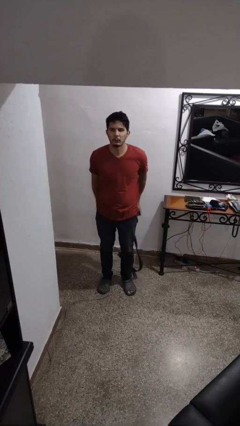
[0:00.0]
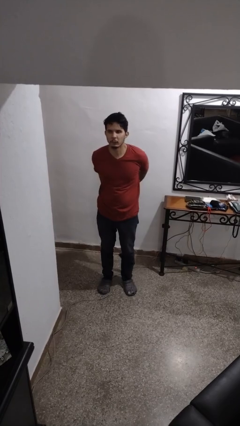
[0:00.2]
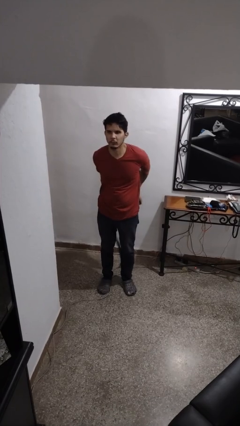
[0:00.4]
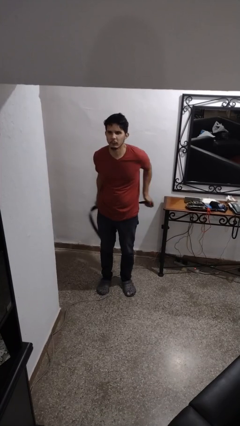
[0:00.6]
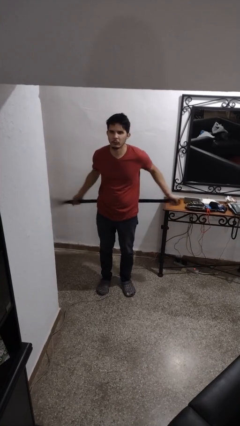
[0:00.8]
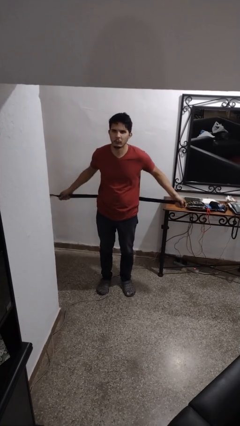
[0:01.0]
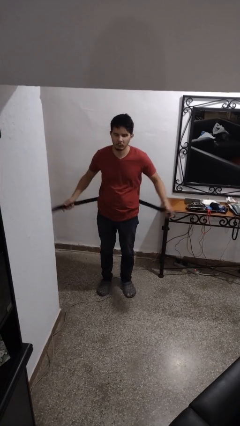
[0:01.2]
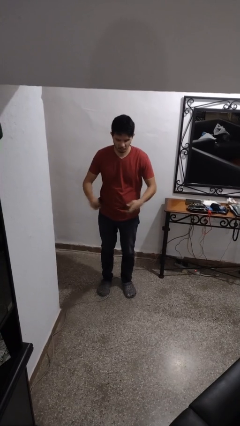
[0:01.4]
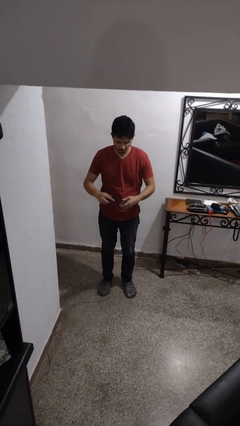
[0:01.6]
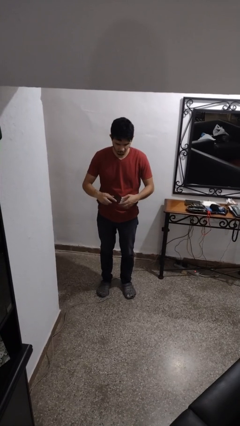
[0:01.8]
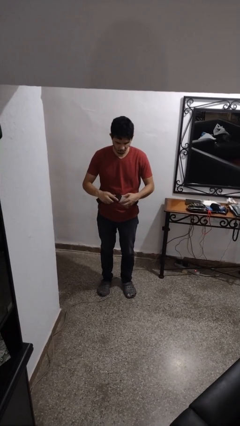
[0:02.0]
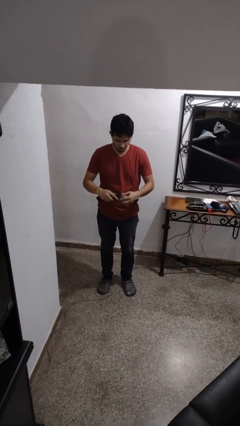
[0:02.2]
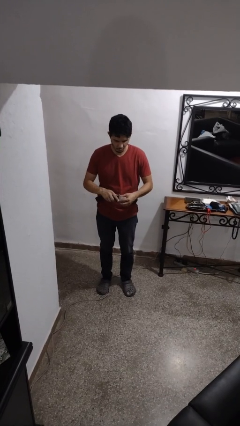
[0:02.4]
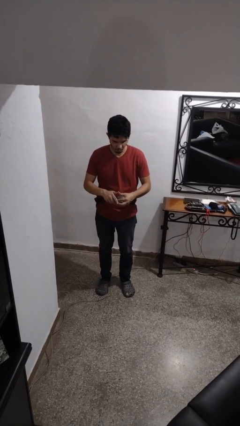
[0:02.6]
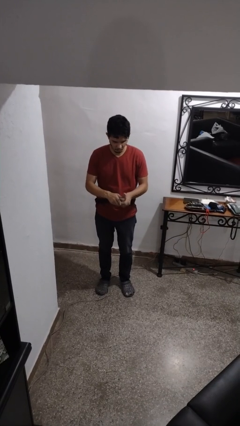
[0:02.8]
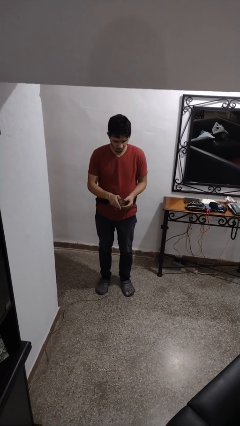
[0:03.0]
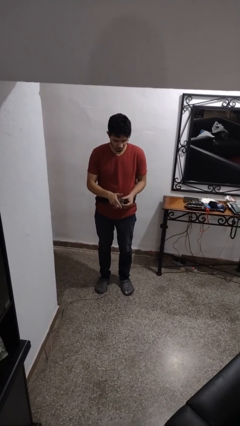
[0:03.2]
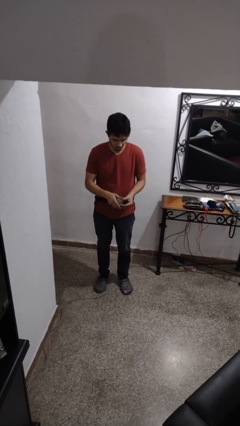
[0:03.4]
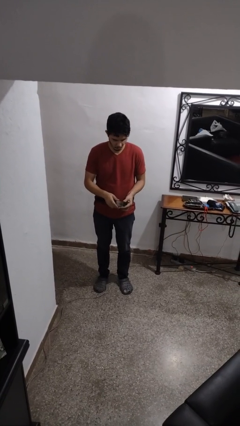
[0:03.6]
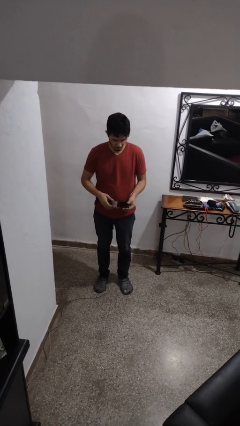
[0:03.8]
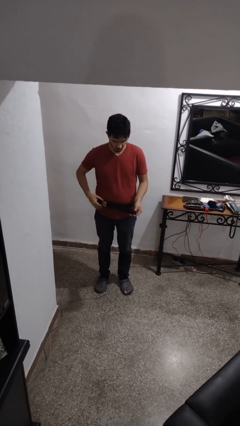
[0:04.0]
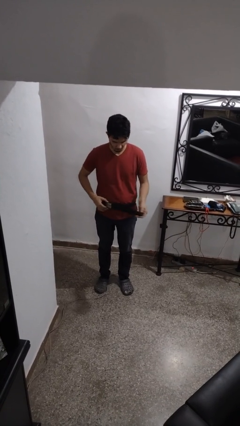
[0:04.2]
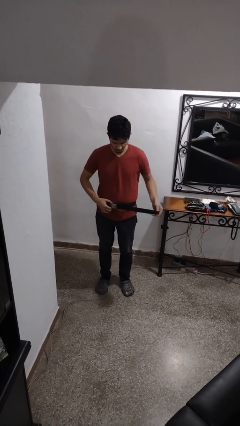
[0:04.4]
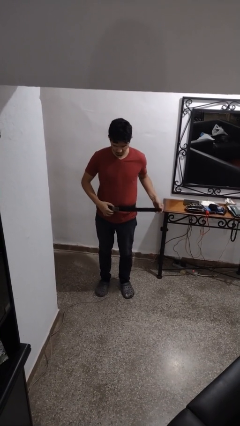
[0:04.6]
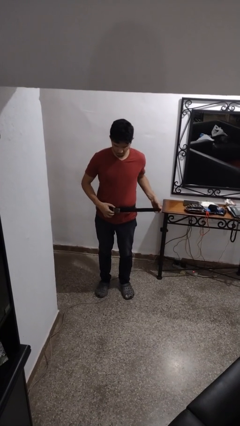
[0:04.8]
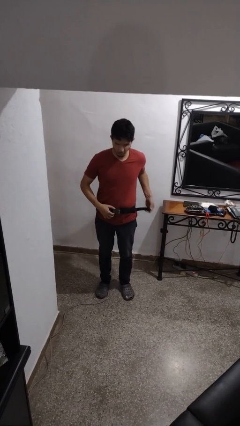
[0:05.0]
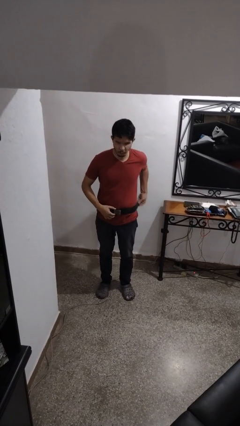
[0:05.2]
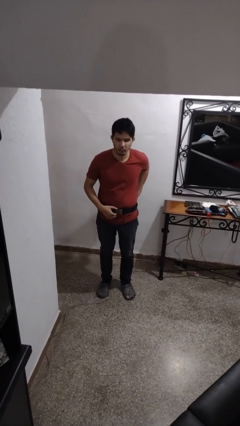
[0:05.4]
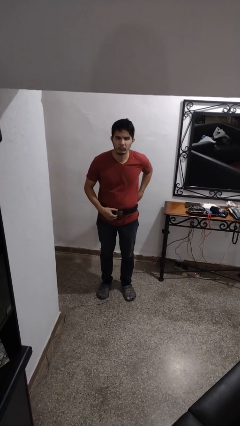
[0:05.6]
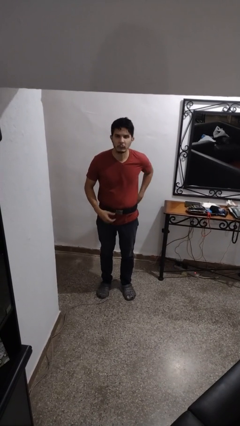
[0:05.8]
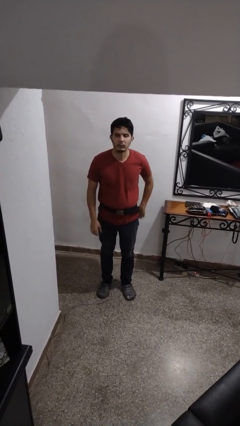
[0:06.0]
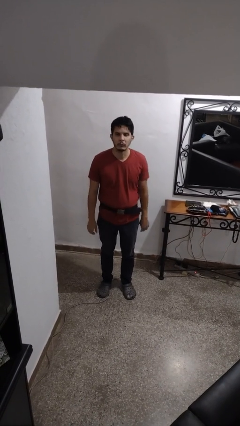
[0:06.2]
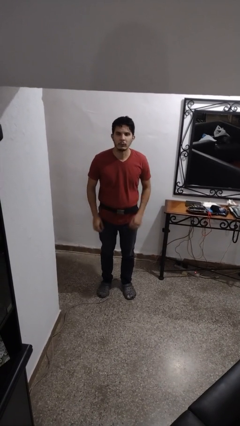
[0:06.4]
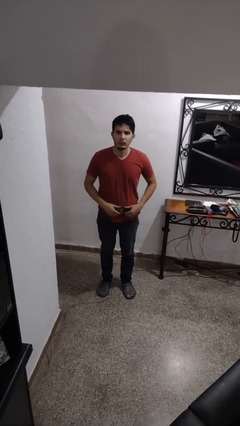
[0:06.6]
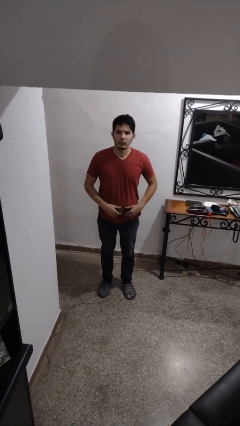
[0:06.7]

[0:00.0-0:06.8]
person puts on belt

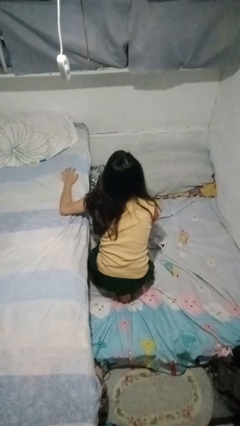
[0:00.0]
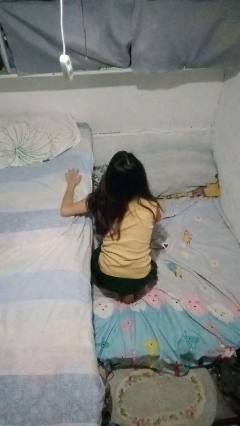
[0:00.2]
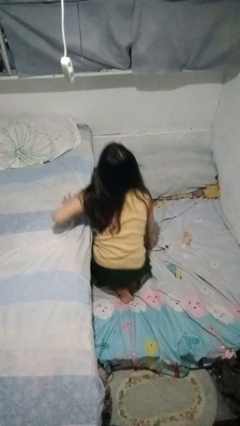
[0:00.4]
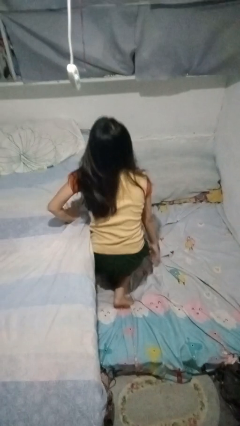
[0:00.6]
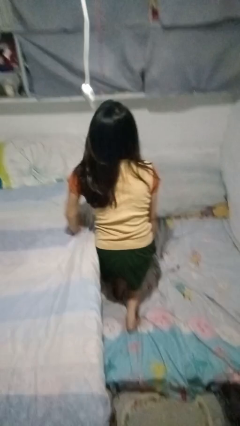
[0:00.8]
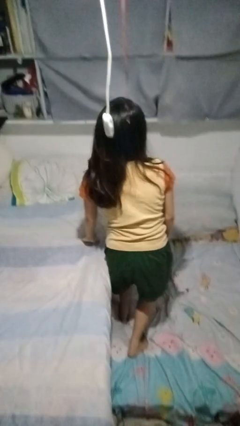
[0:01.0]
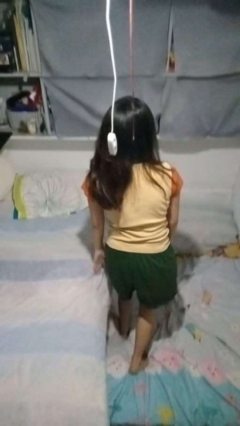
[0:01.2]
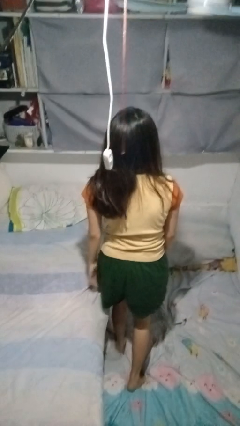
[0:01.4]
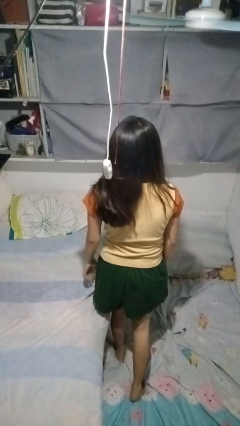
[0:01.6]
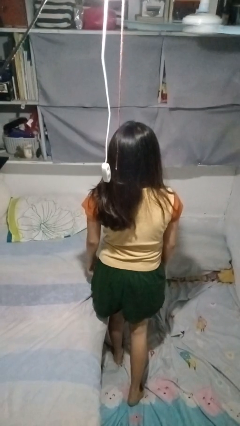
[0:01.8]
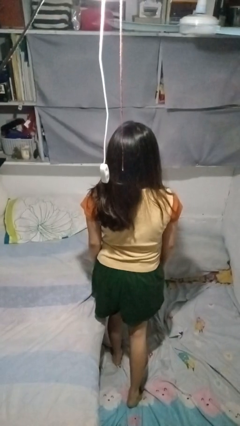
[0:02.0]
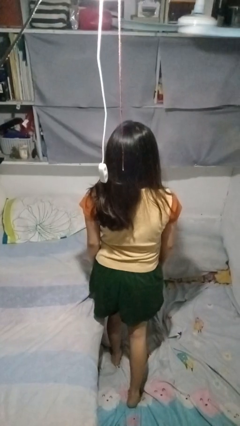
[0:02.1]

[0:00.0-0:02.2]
person stands up from floor

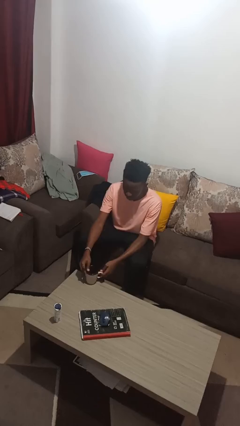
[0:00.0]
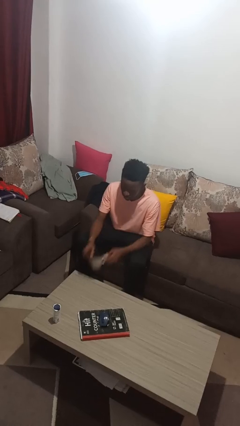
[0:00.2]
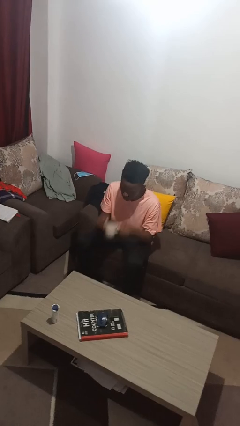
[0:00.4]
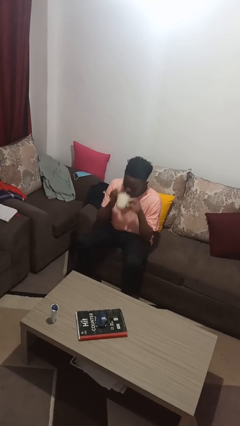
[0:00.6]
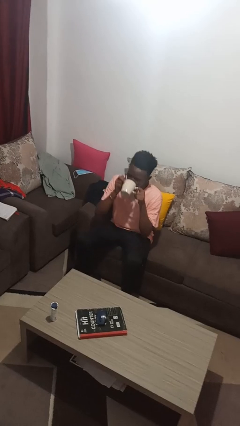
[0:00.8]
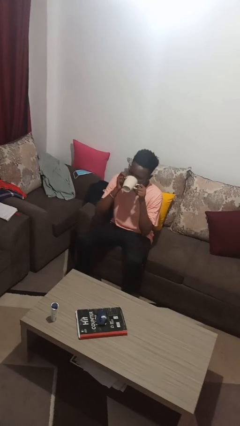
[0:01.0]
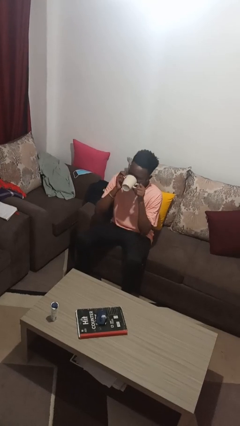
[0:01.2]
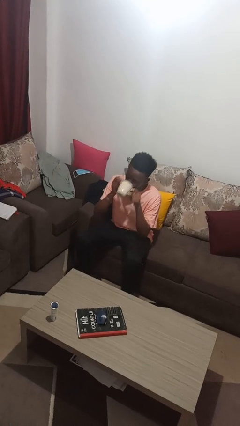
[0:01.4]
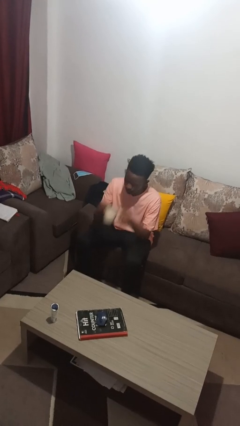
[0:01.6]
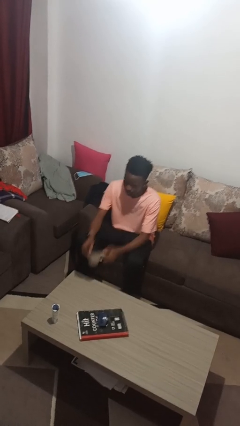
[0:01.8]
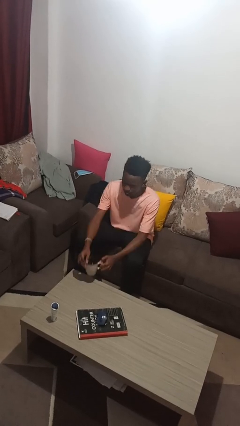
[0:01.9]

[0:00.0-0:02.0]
person drinks from mug

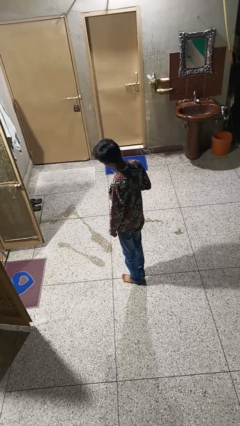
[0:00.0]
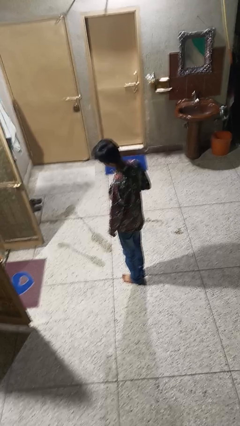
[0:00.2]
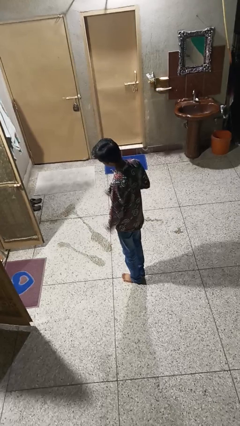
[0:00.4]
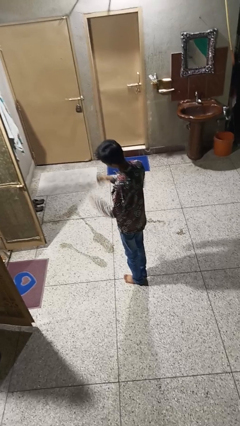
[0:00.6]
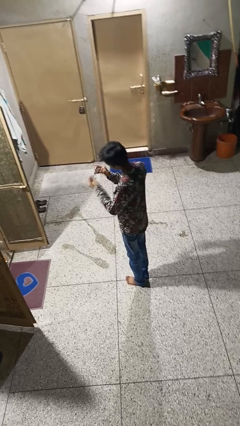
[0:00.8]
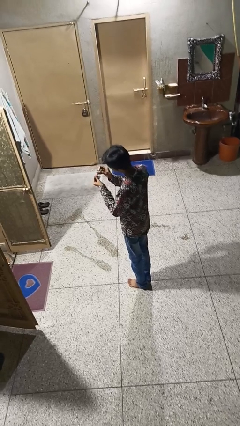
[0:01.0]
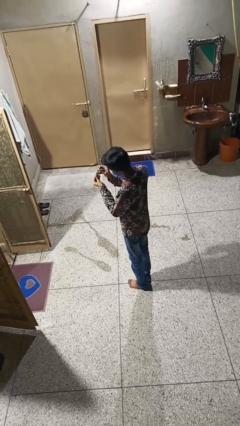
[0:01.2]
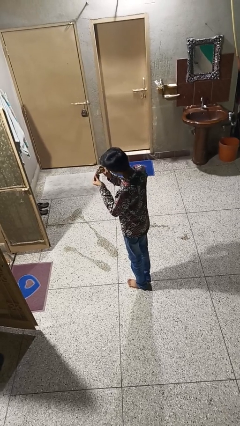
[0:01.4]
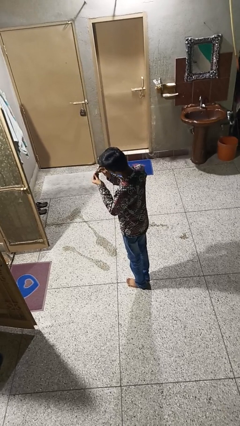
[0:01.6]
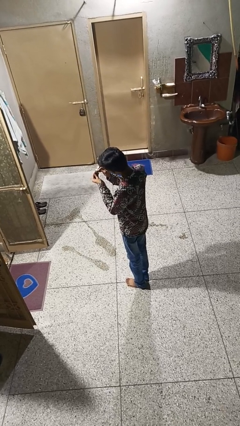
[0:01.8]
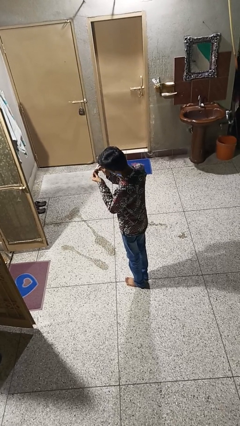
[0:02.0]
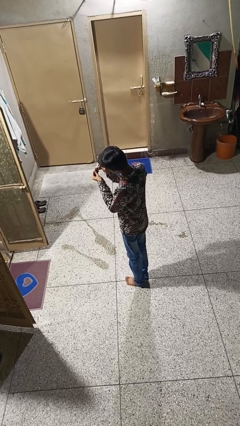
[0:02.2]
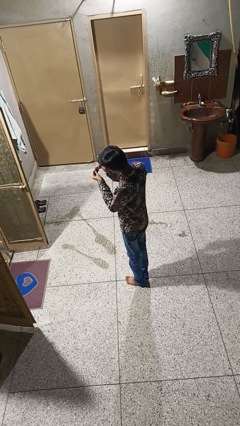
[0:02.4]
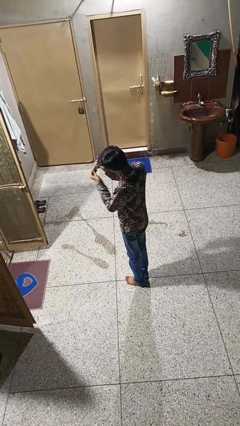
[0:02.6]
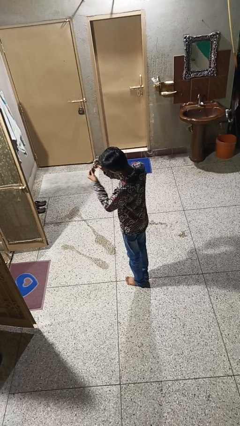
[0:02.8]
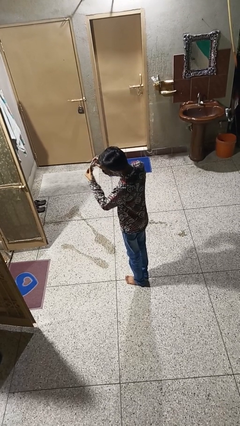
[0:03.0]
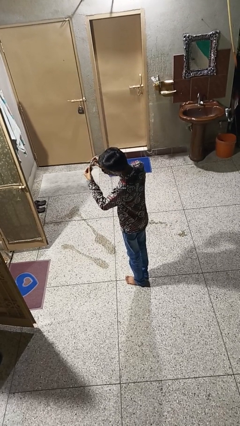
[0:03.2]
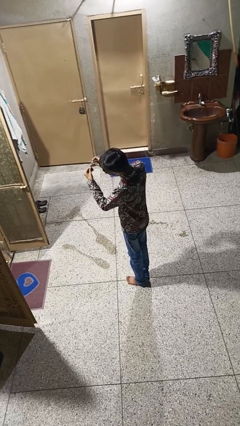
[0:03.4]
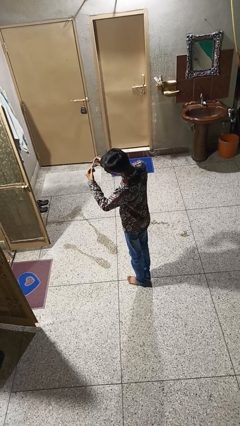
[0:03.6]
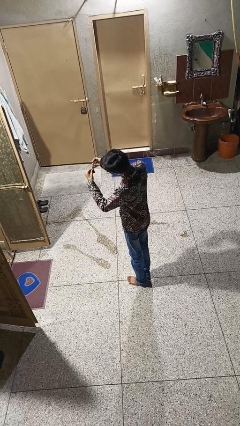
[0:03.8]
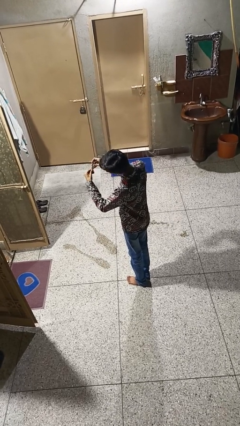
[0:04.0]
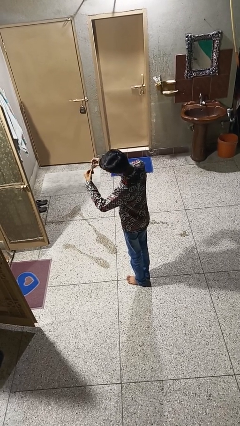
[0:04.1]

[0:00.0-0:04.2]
person clips fingernails

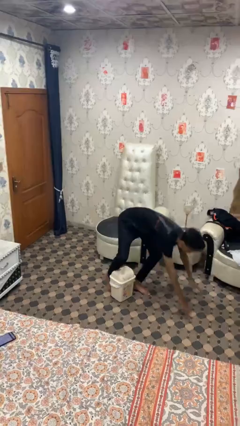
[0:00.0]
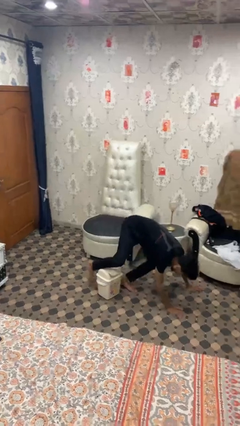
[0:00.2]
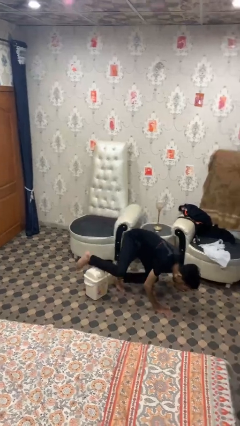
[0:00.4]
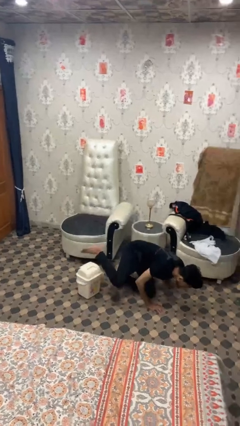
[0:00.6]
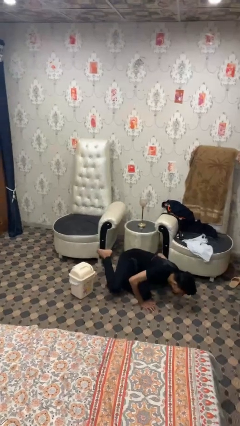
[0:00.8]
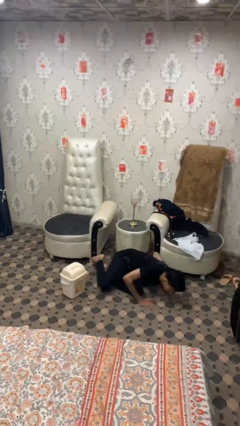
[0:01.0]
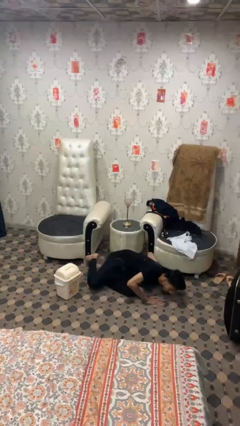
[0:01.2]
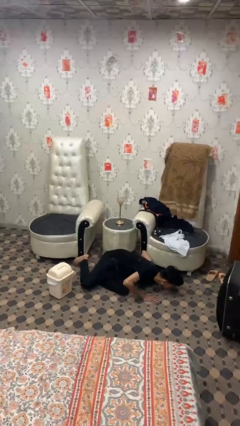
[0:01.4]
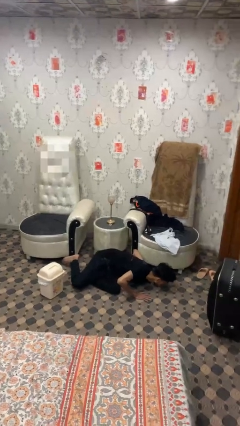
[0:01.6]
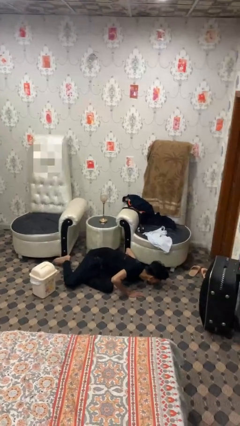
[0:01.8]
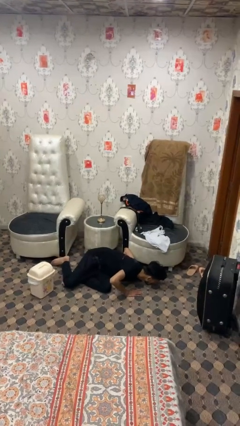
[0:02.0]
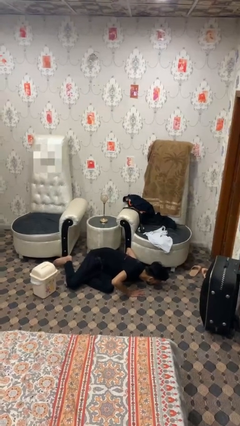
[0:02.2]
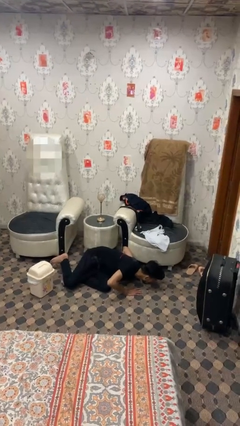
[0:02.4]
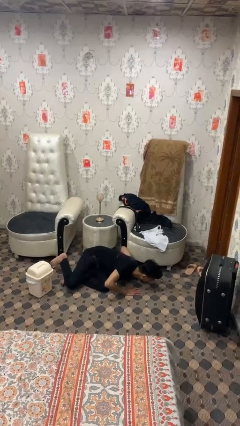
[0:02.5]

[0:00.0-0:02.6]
person lies down on floor
